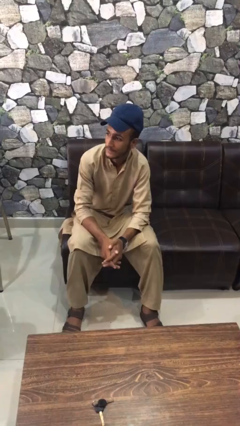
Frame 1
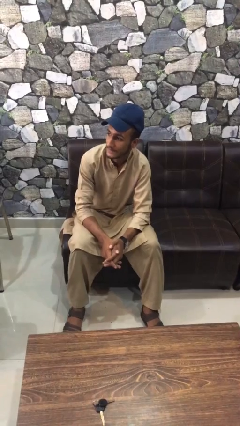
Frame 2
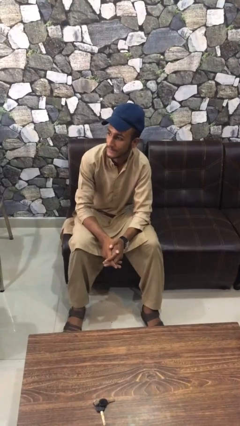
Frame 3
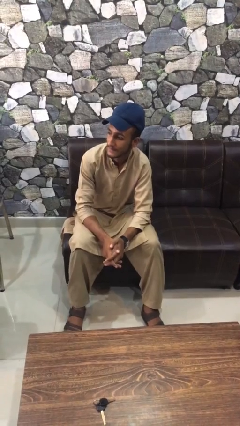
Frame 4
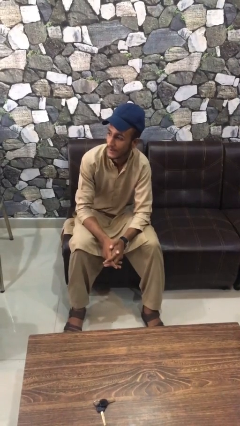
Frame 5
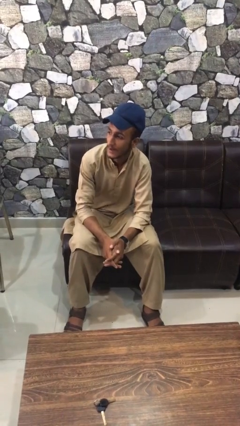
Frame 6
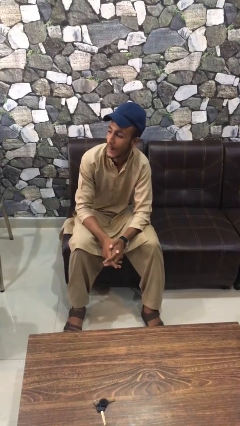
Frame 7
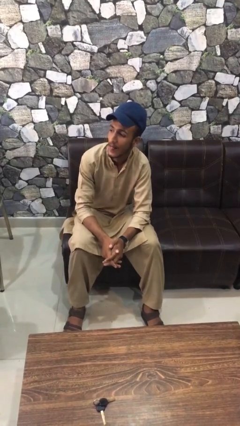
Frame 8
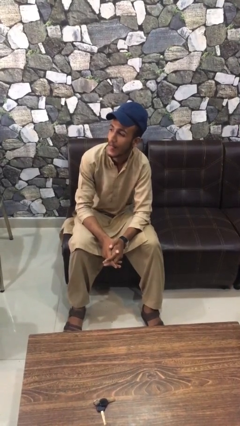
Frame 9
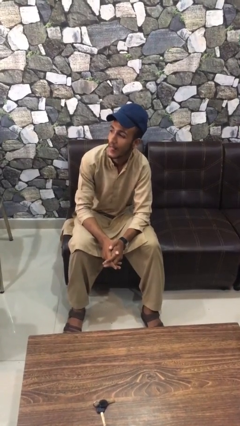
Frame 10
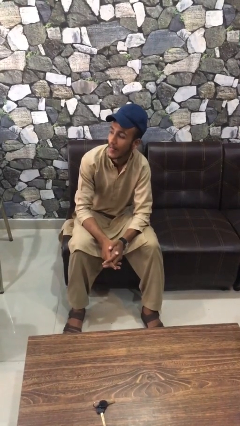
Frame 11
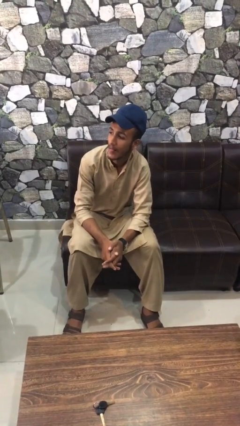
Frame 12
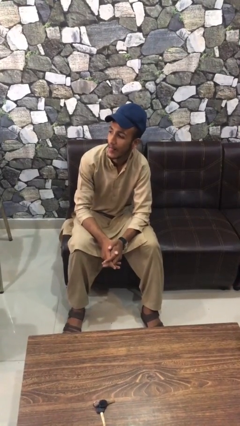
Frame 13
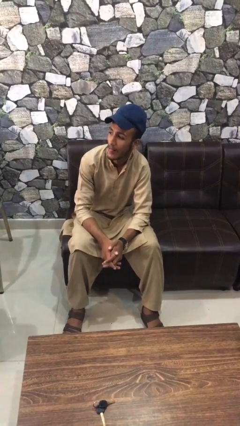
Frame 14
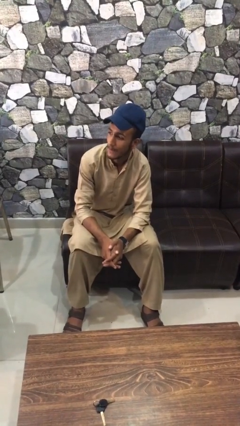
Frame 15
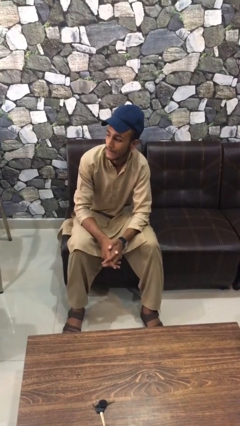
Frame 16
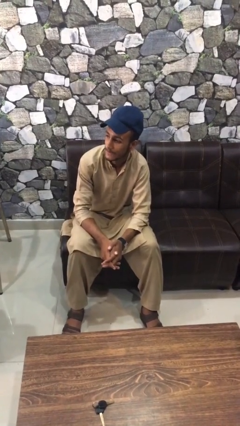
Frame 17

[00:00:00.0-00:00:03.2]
person sticks out tongue

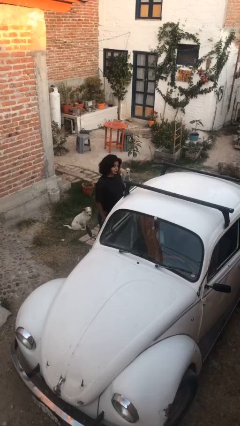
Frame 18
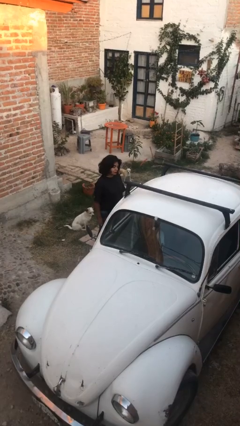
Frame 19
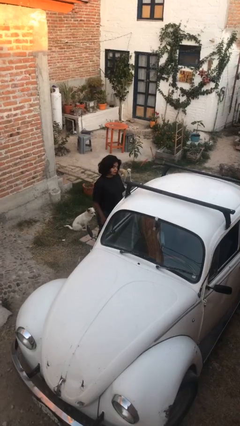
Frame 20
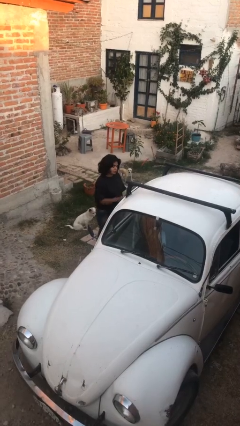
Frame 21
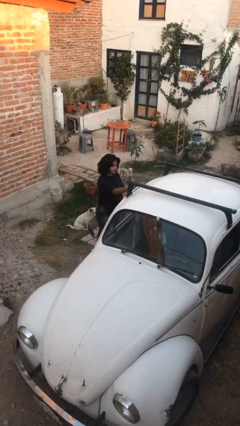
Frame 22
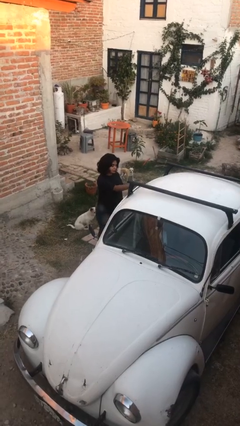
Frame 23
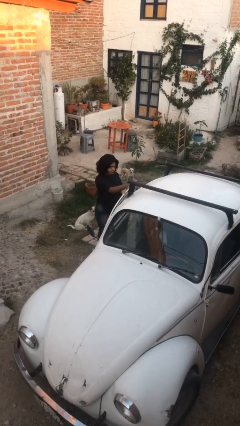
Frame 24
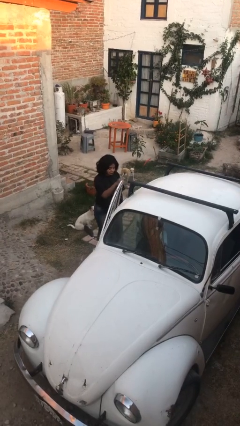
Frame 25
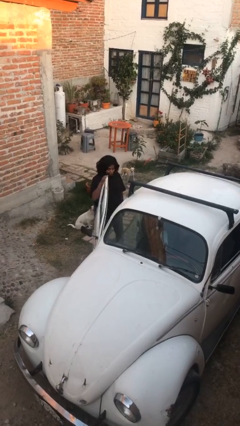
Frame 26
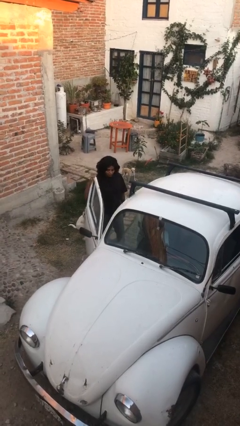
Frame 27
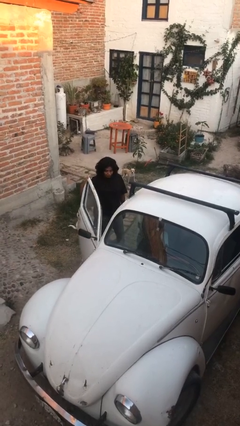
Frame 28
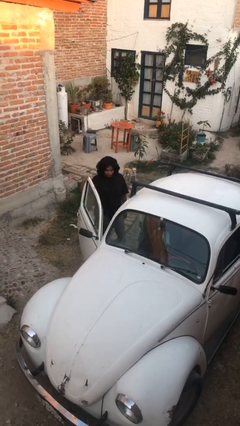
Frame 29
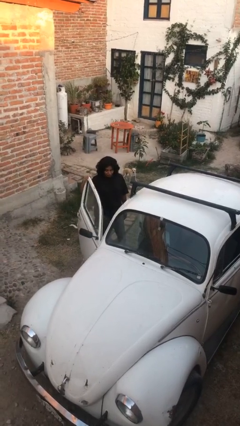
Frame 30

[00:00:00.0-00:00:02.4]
person opens car door

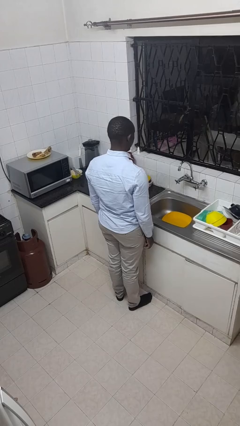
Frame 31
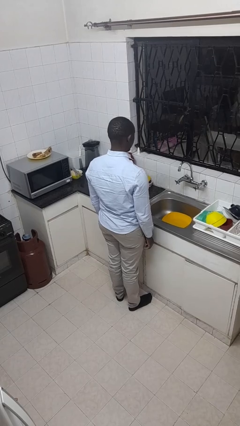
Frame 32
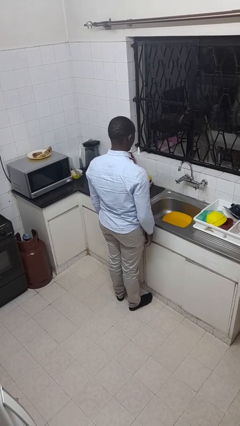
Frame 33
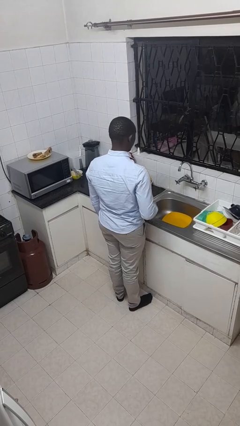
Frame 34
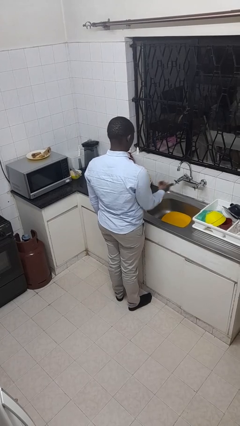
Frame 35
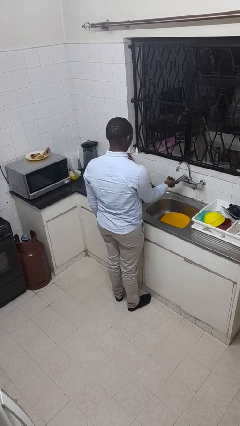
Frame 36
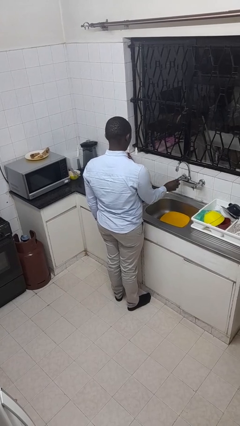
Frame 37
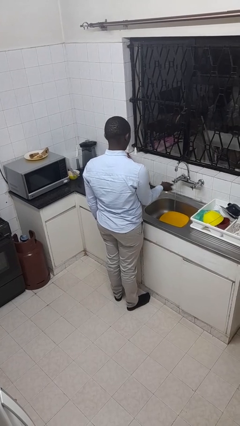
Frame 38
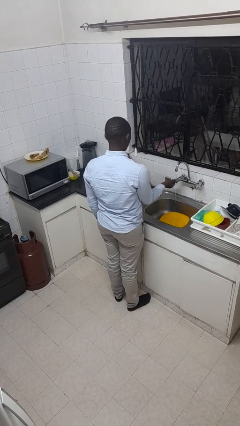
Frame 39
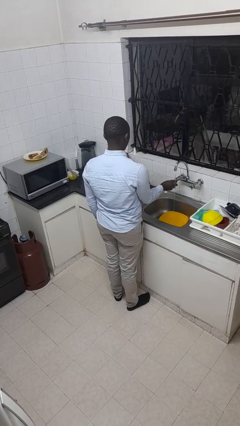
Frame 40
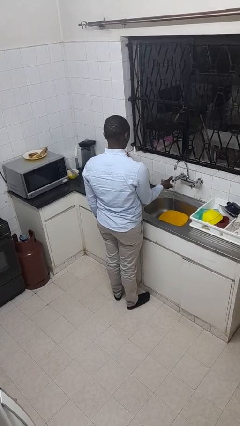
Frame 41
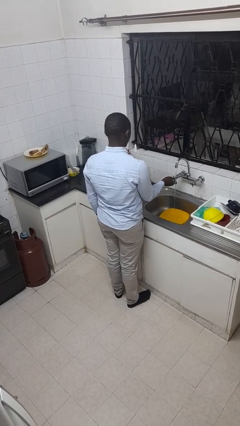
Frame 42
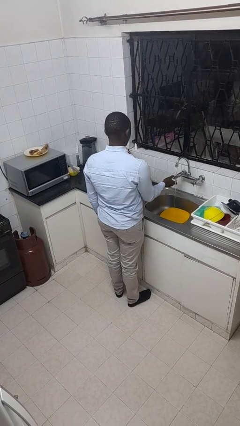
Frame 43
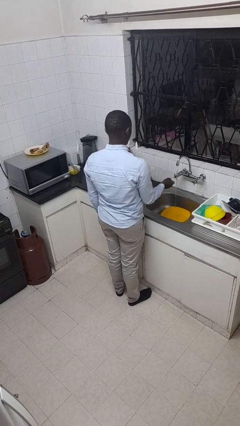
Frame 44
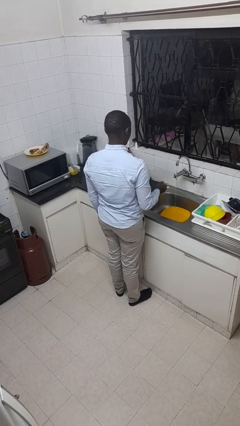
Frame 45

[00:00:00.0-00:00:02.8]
person turns on faucet

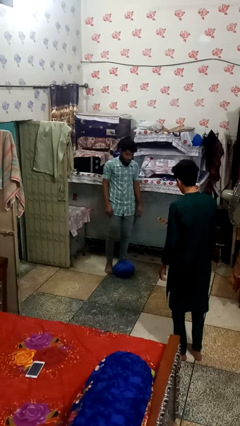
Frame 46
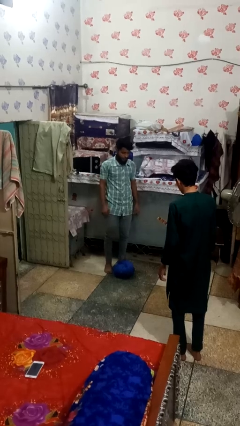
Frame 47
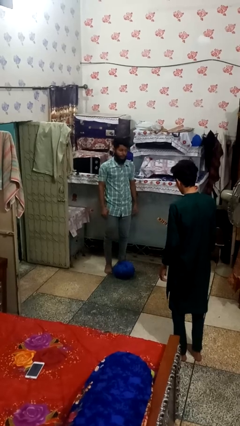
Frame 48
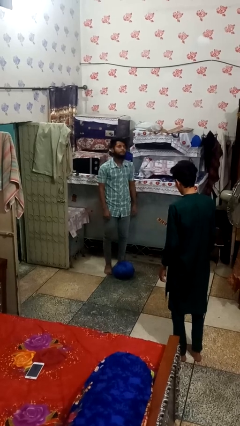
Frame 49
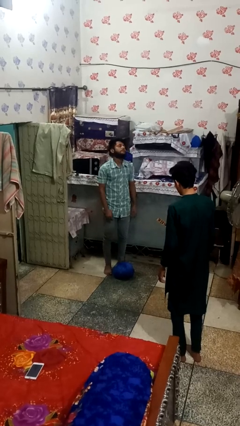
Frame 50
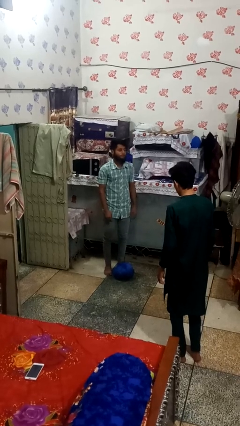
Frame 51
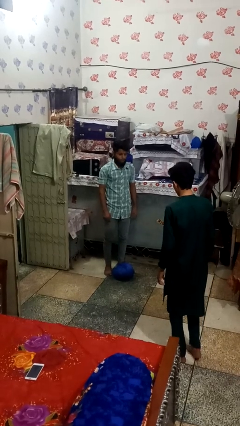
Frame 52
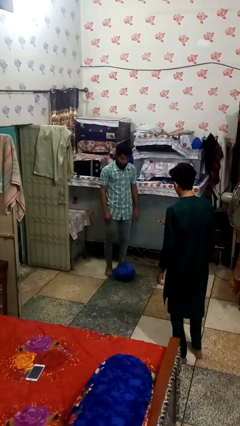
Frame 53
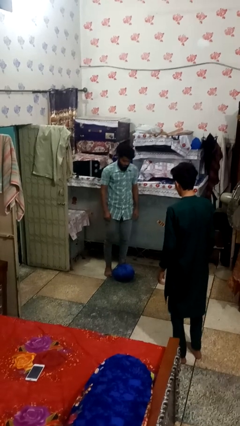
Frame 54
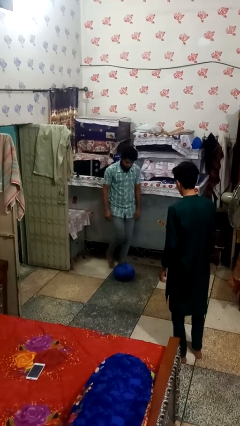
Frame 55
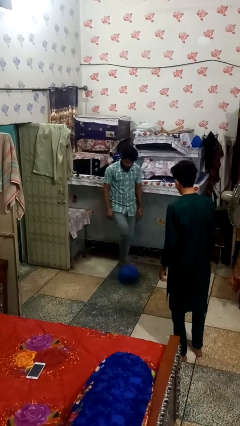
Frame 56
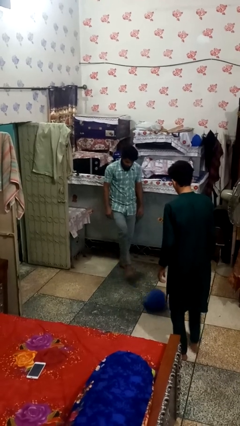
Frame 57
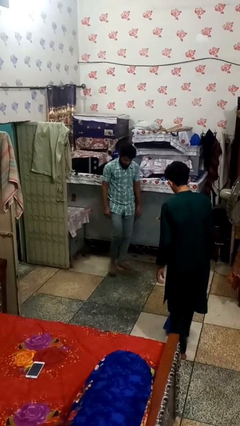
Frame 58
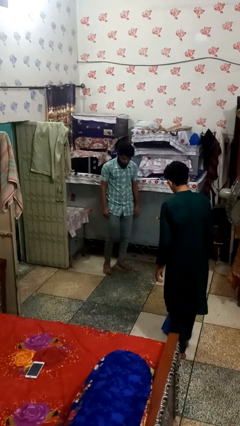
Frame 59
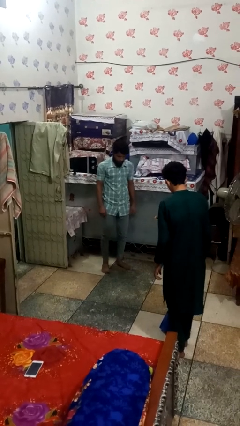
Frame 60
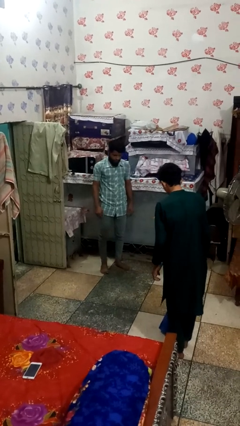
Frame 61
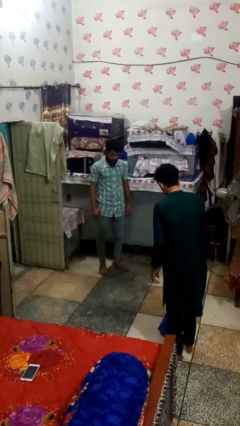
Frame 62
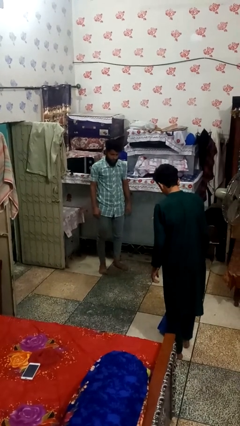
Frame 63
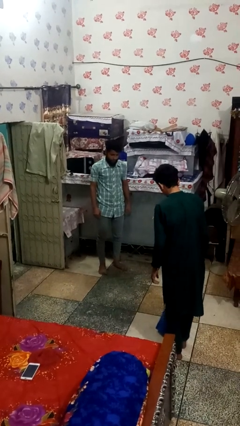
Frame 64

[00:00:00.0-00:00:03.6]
person kicks object to person

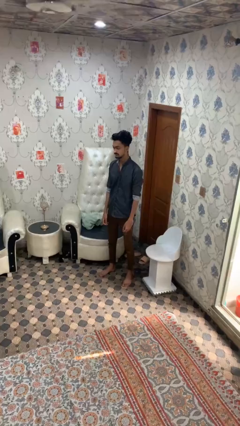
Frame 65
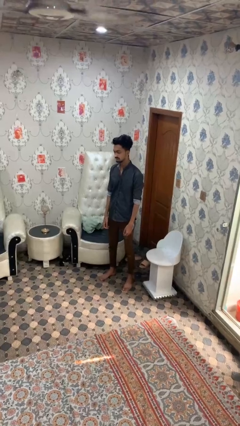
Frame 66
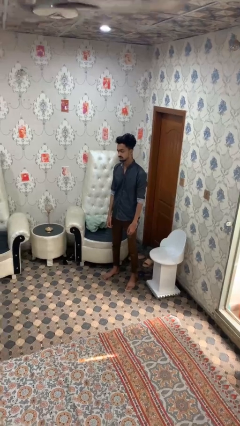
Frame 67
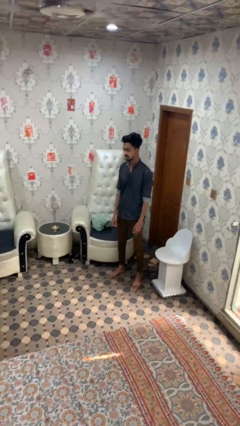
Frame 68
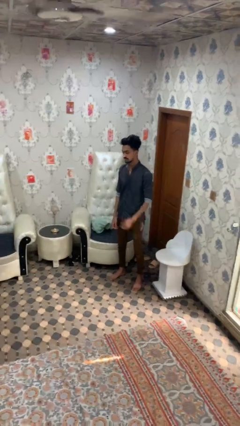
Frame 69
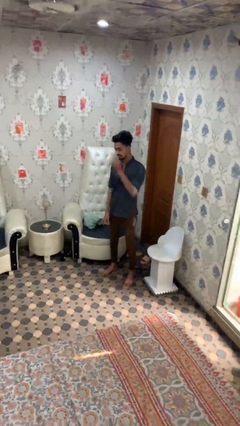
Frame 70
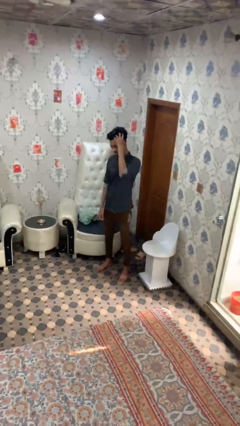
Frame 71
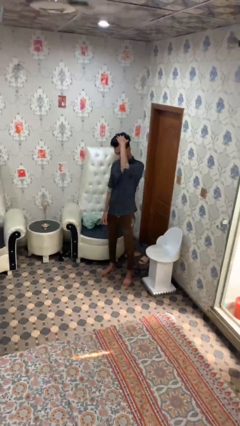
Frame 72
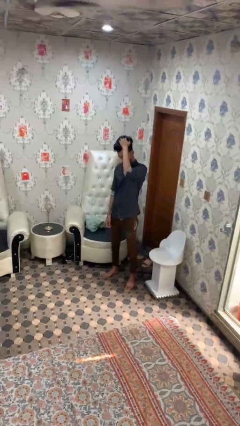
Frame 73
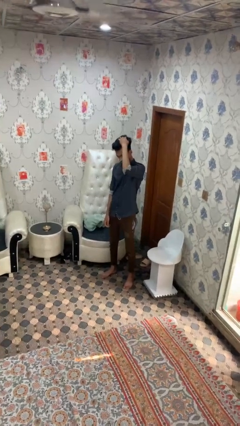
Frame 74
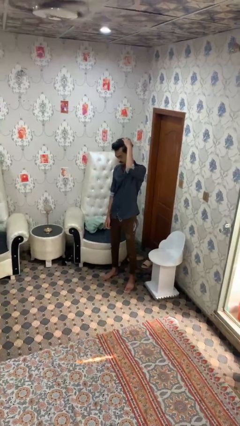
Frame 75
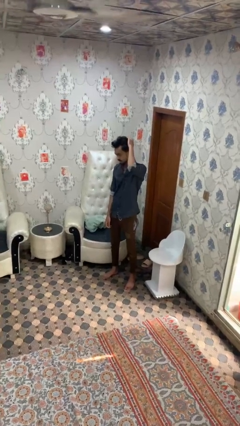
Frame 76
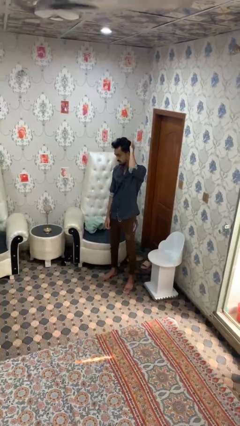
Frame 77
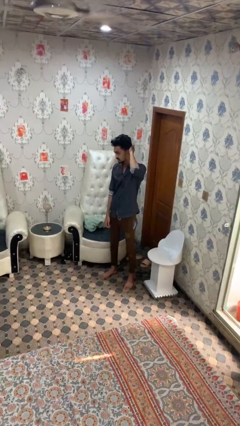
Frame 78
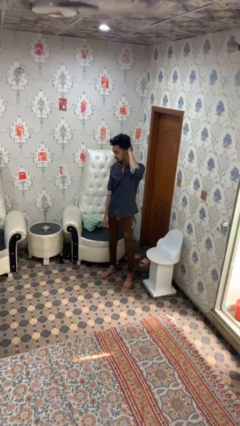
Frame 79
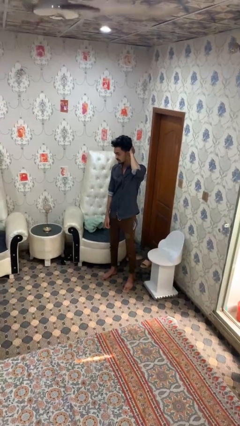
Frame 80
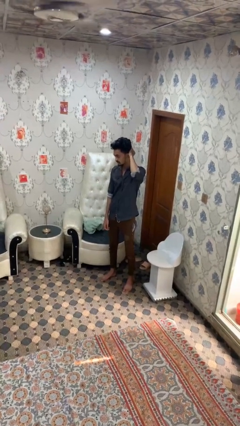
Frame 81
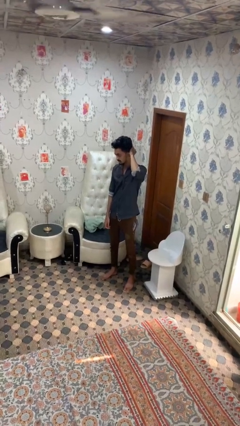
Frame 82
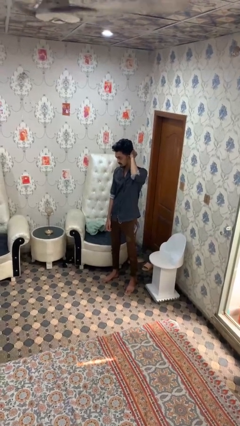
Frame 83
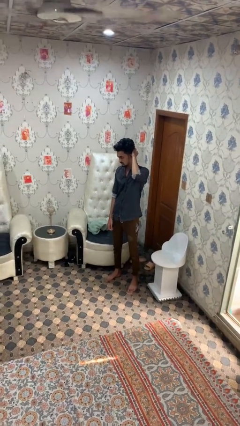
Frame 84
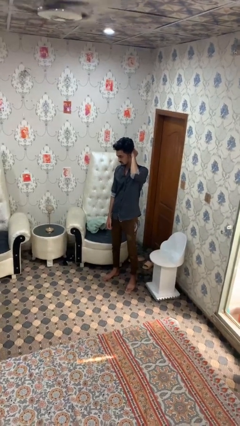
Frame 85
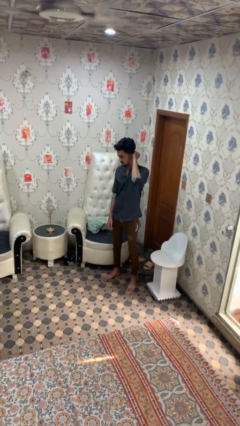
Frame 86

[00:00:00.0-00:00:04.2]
person strokes hair

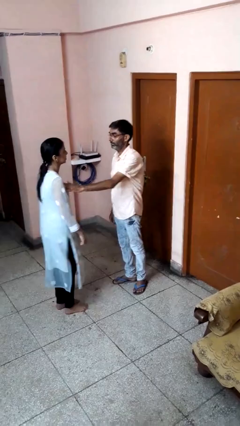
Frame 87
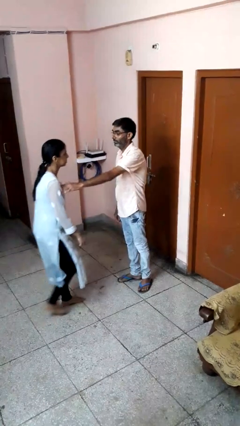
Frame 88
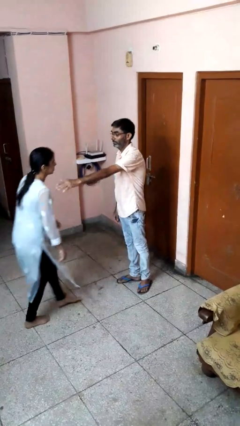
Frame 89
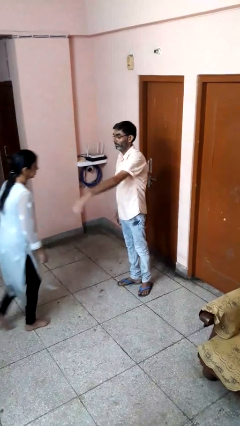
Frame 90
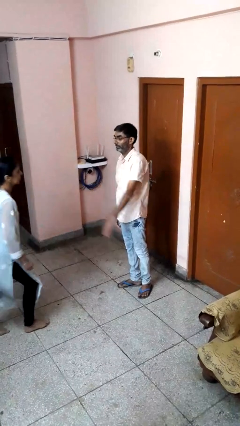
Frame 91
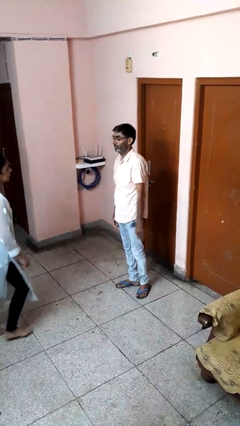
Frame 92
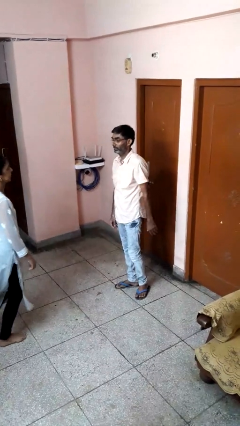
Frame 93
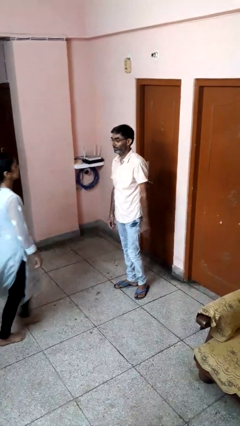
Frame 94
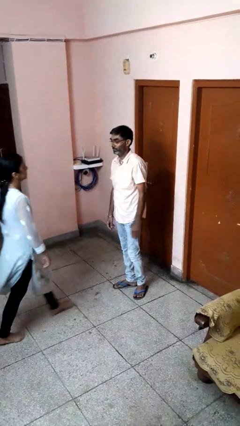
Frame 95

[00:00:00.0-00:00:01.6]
person shoves person
